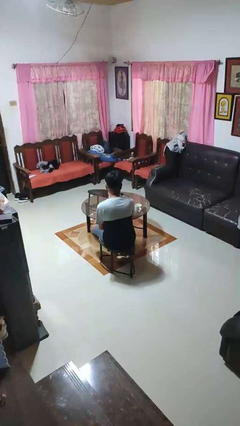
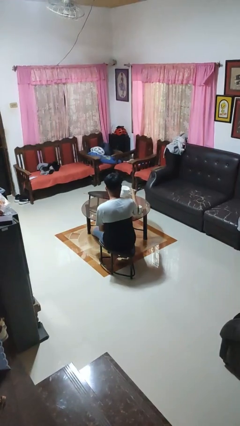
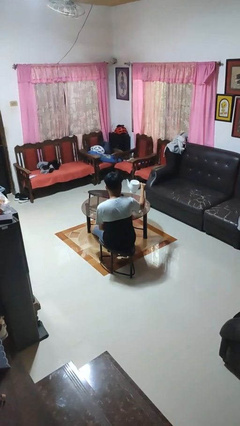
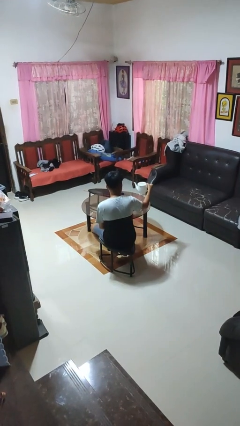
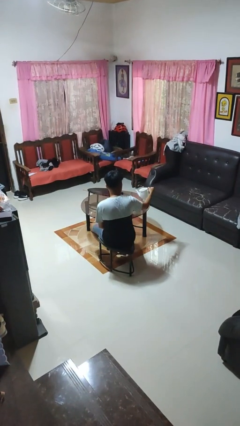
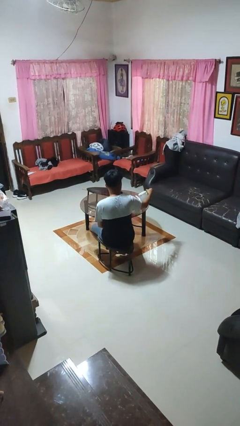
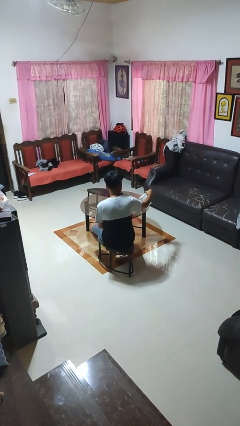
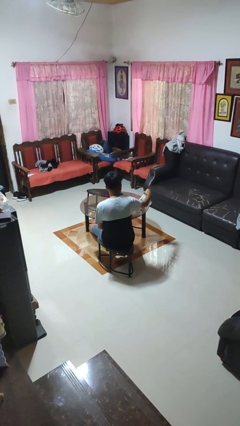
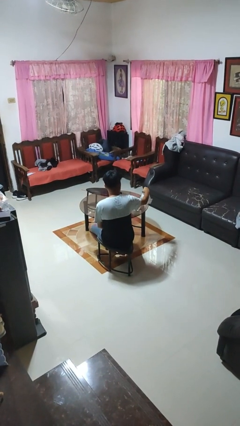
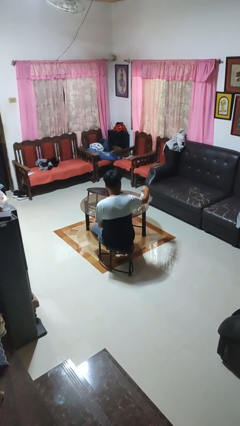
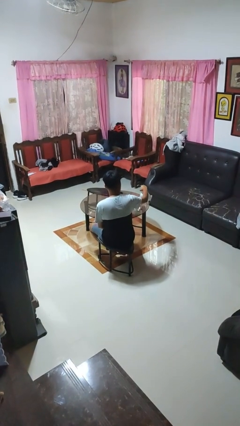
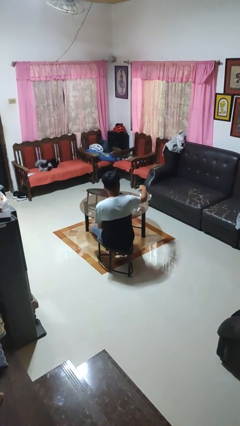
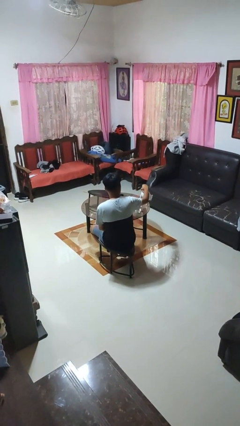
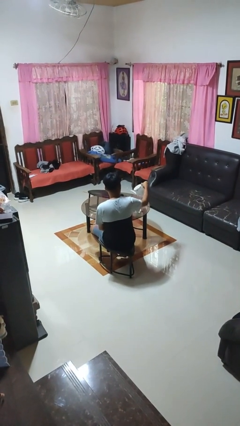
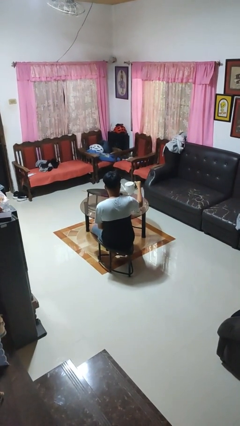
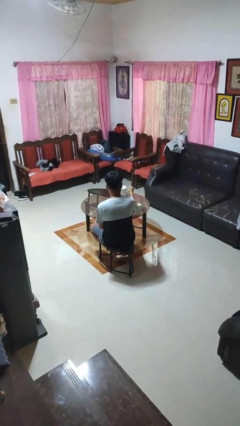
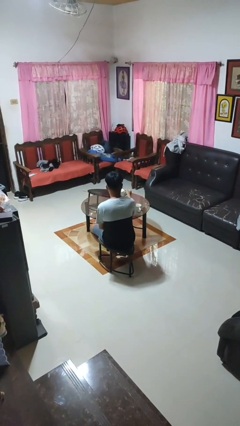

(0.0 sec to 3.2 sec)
person pours coffee into mug

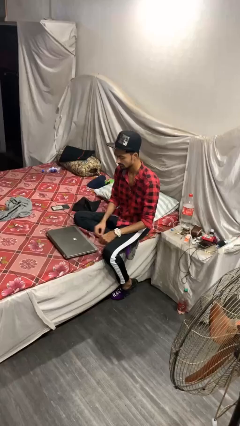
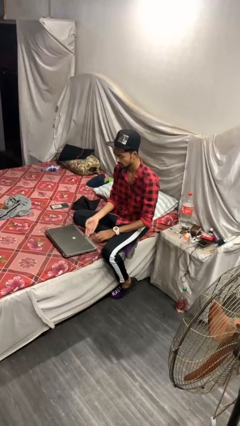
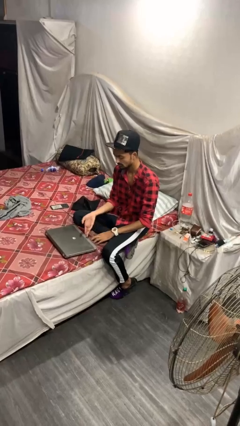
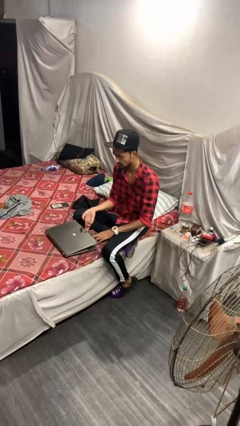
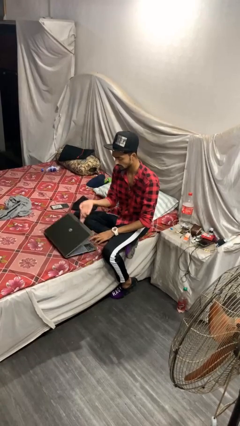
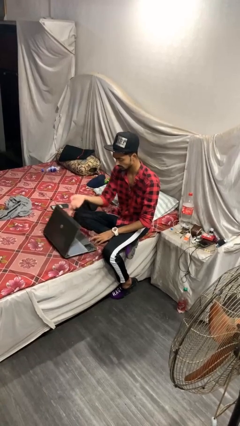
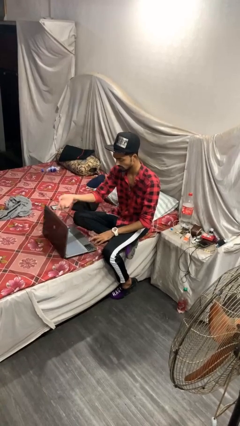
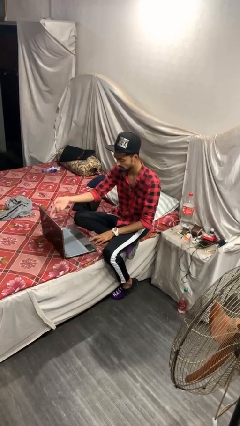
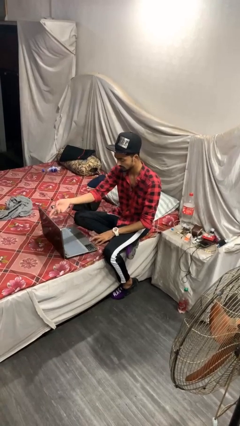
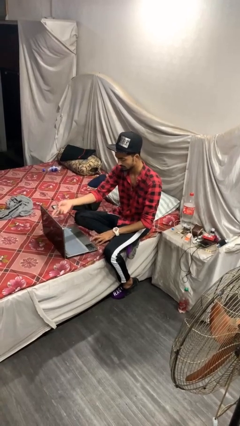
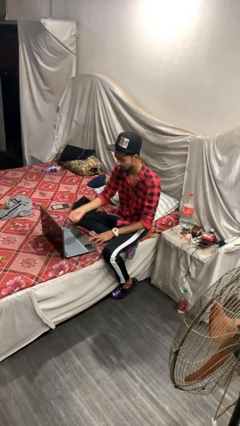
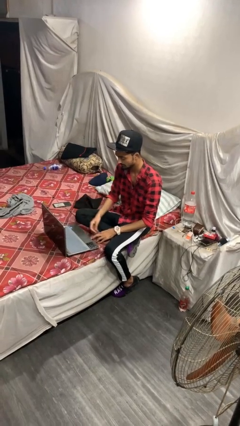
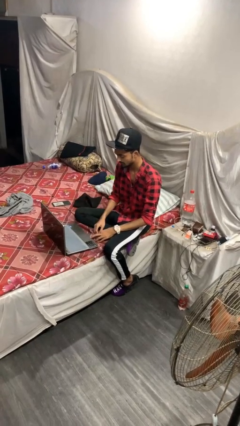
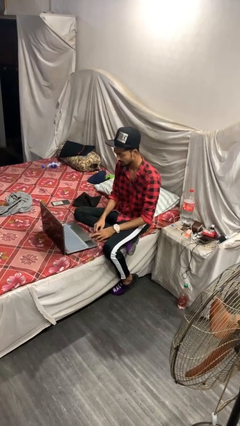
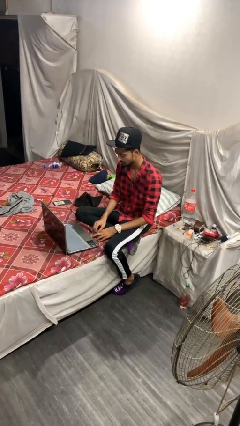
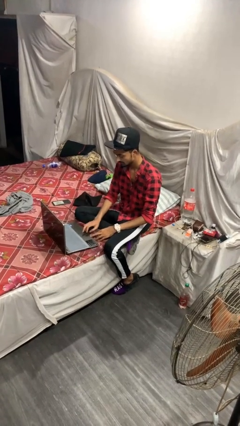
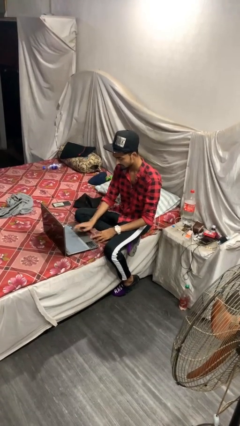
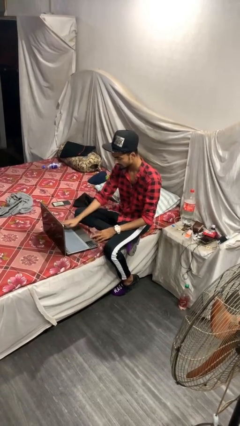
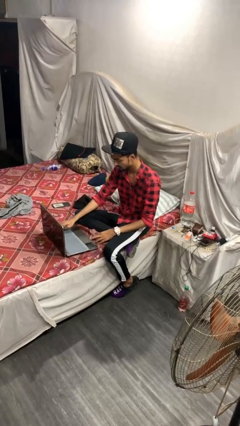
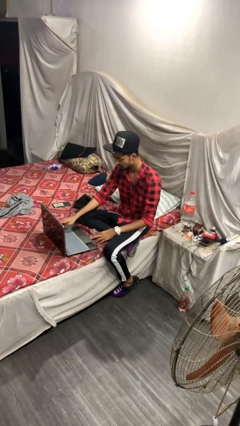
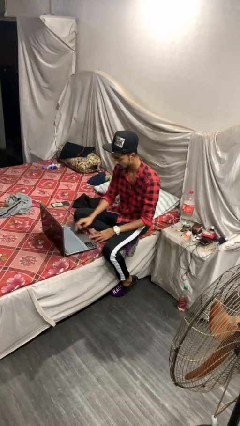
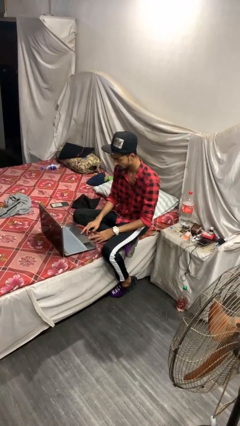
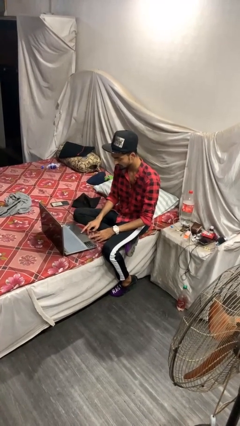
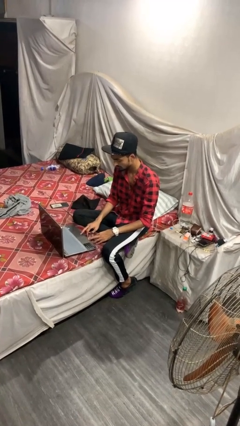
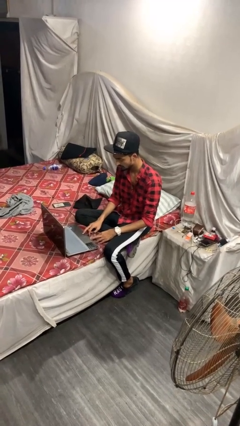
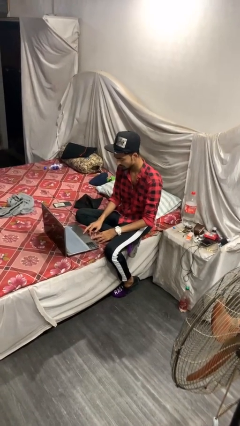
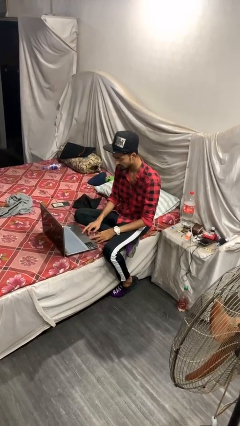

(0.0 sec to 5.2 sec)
person opens laptop

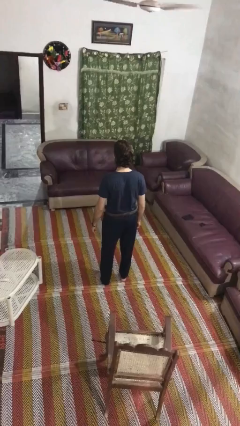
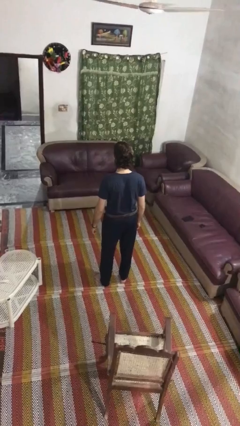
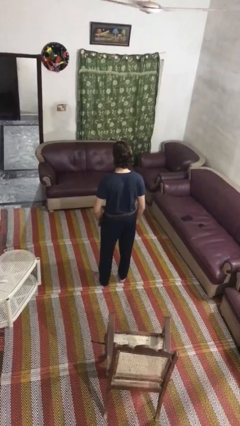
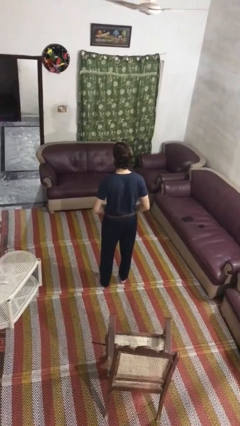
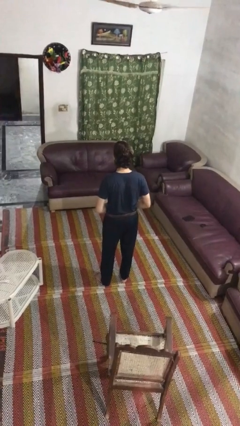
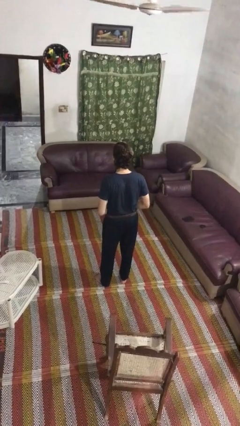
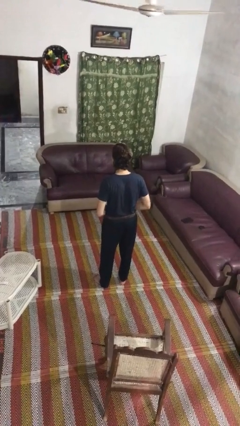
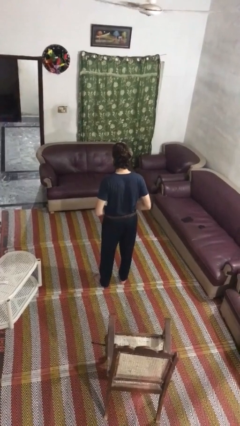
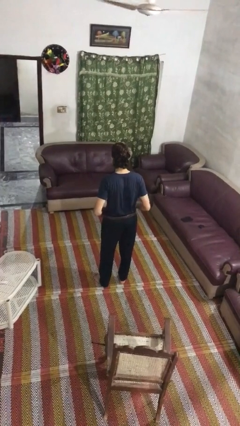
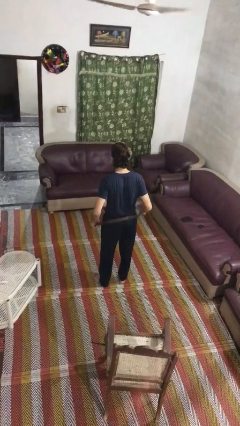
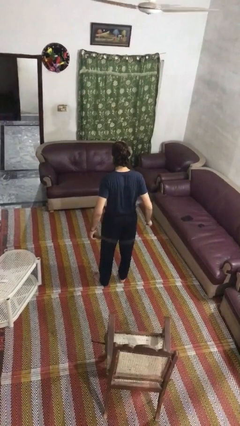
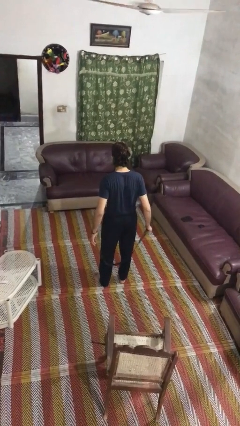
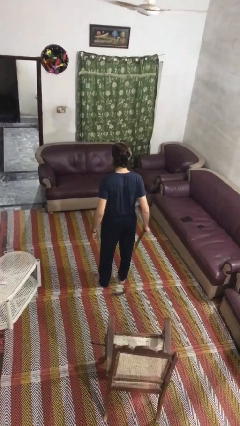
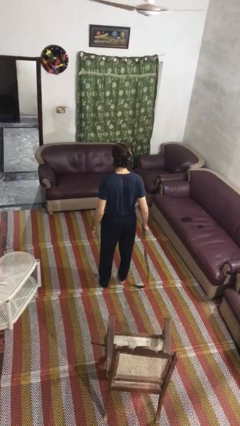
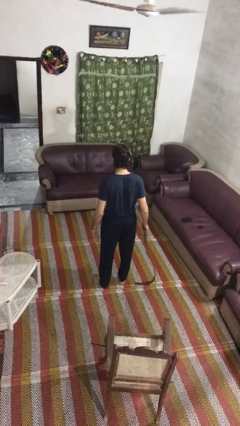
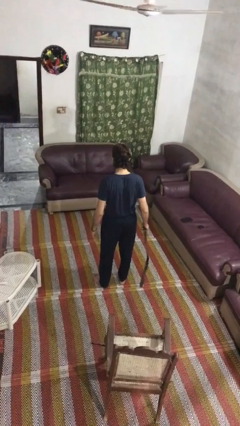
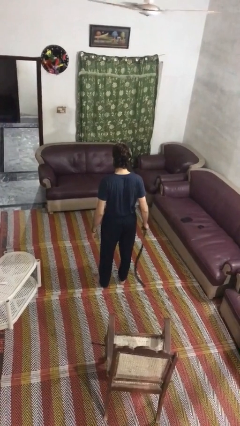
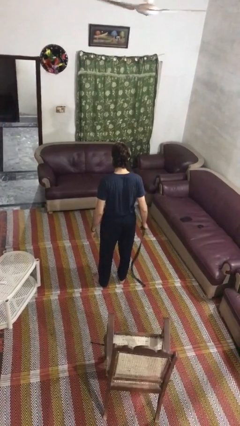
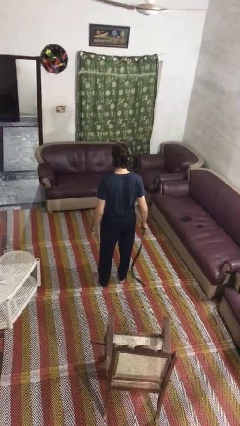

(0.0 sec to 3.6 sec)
person takes off belt

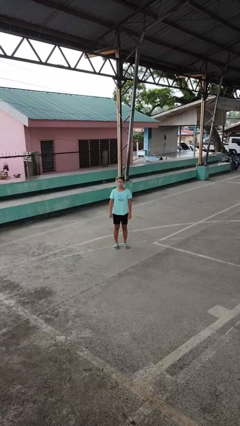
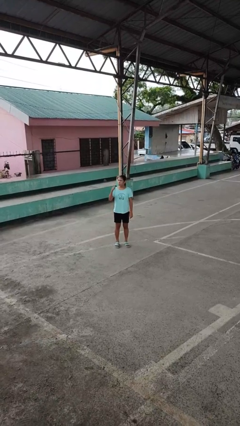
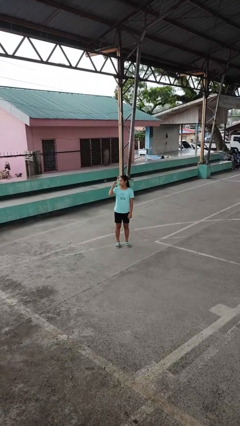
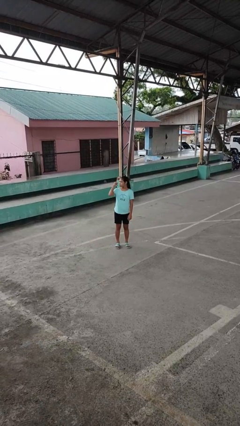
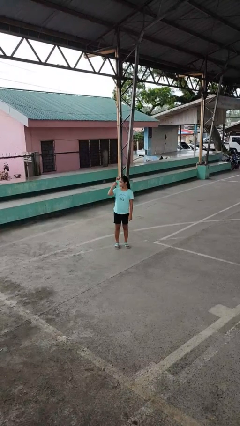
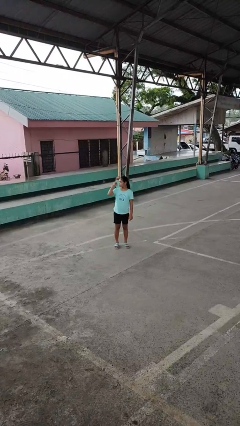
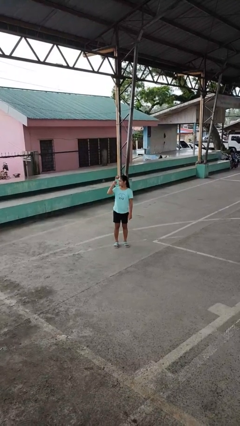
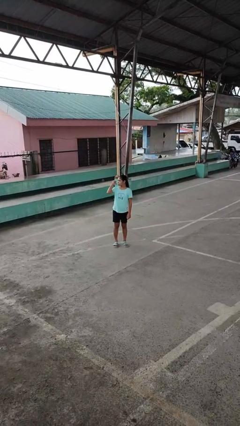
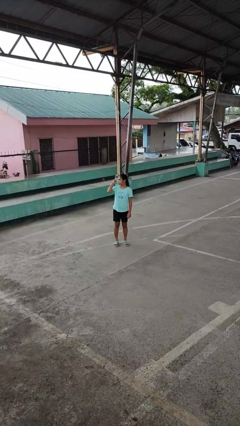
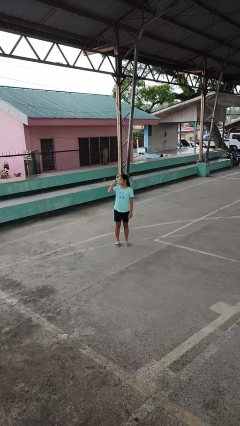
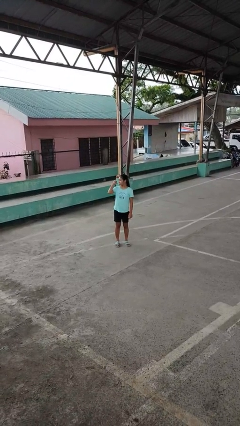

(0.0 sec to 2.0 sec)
person gestures behind me

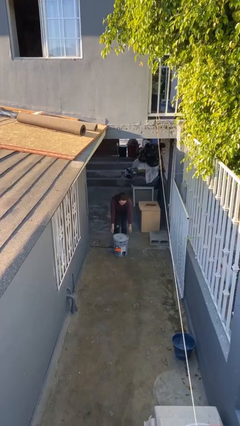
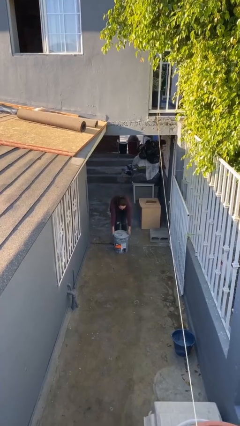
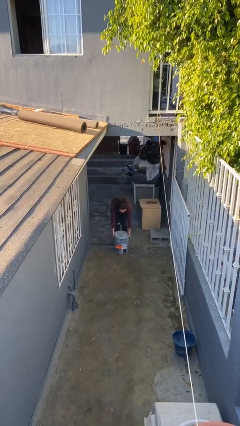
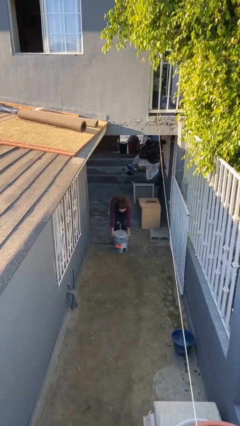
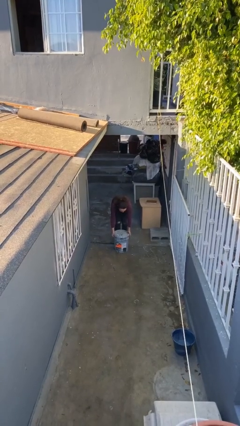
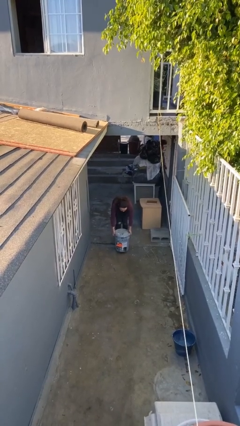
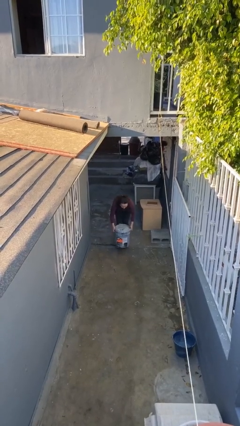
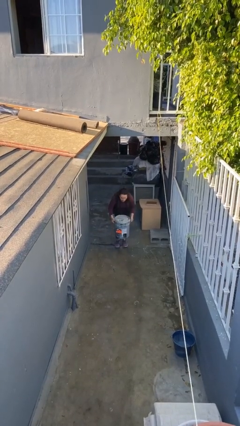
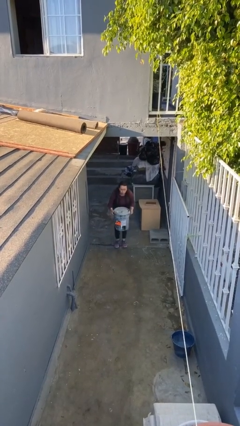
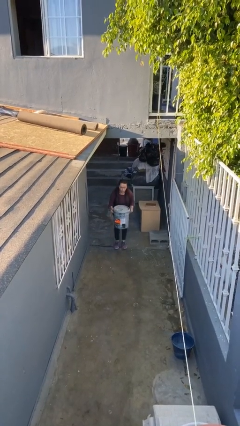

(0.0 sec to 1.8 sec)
person picks up object from floor

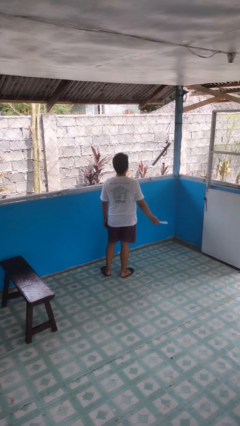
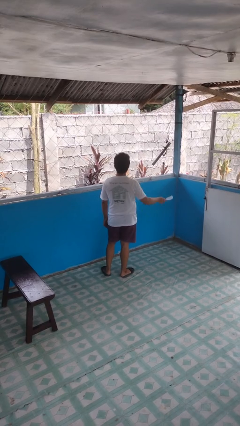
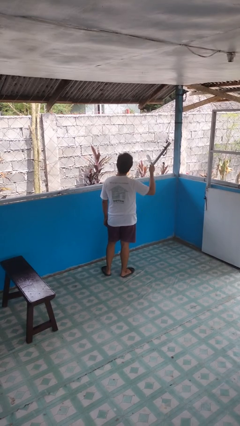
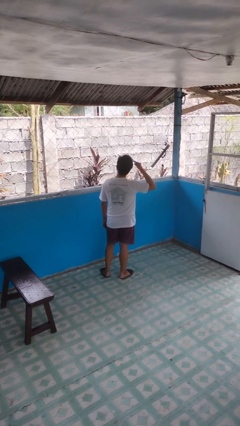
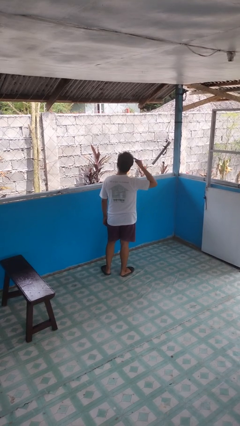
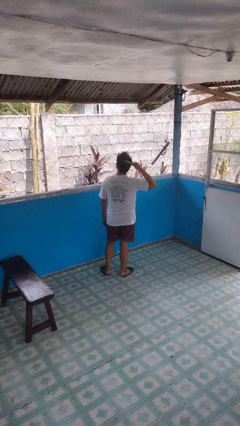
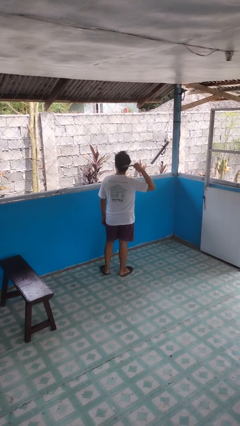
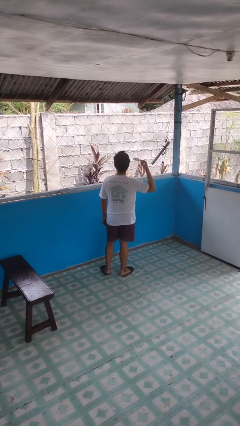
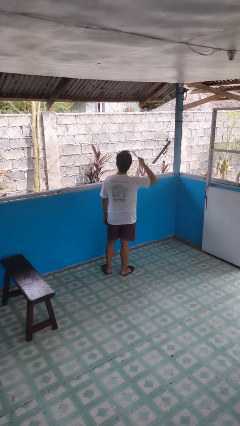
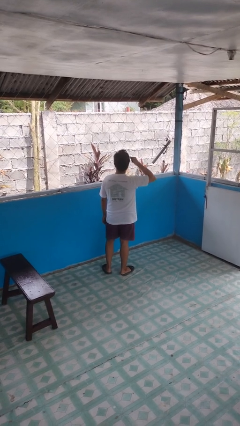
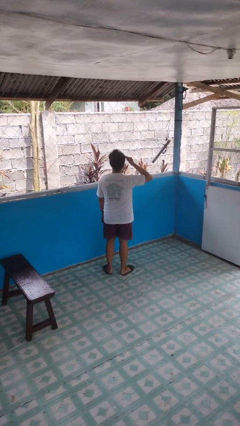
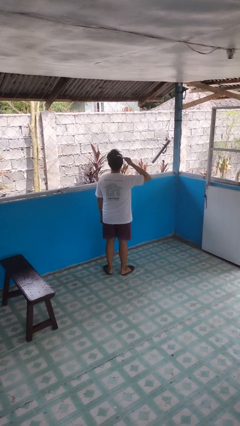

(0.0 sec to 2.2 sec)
person brushes hair
